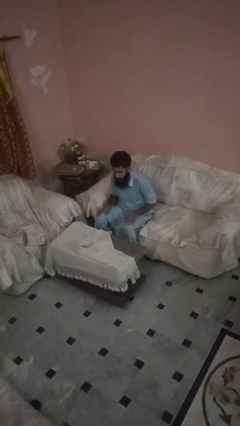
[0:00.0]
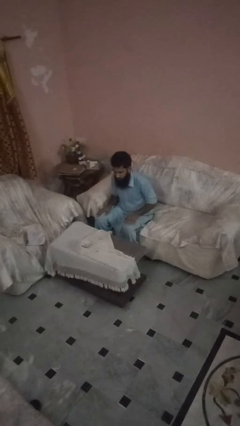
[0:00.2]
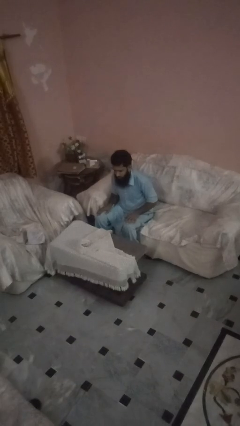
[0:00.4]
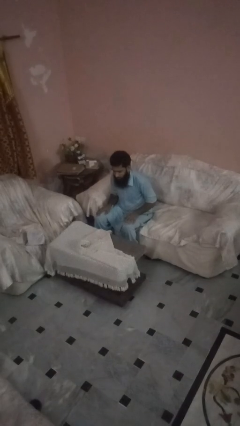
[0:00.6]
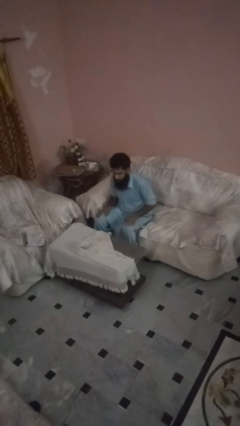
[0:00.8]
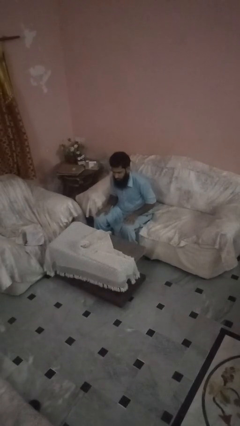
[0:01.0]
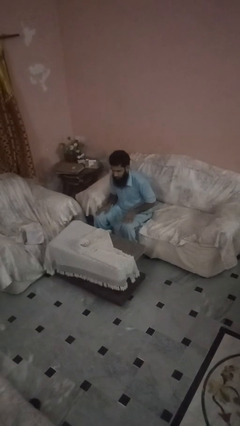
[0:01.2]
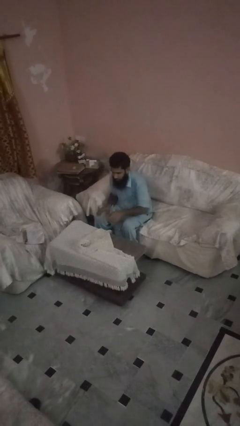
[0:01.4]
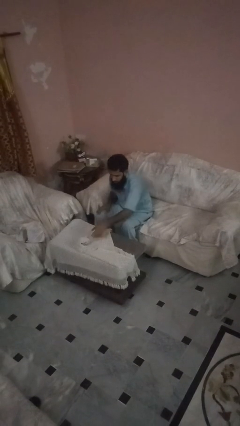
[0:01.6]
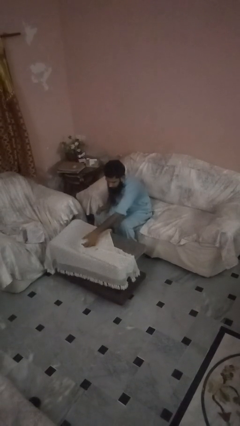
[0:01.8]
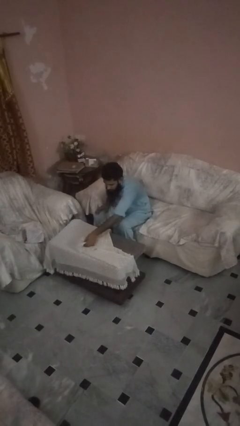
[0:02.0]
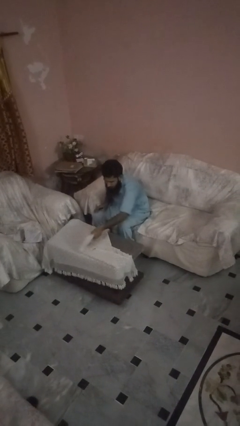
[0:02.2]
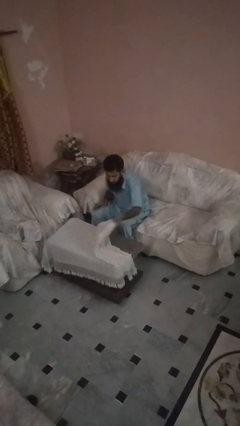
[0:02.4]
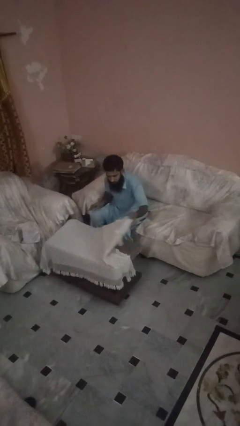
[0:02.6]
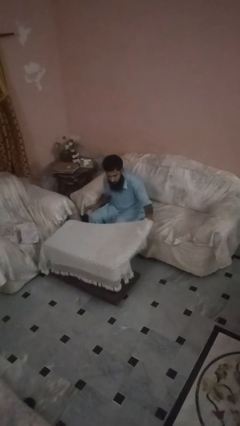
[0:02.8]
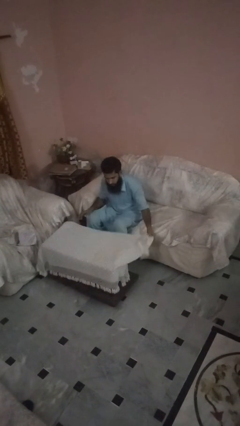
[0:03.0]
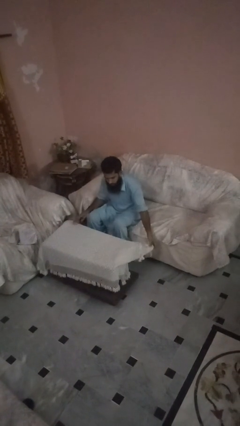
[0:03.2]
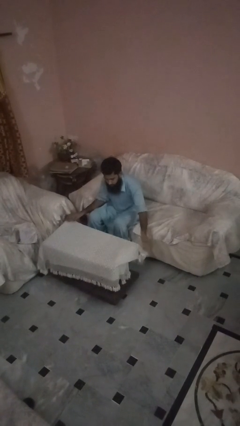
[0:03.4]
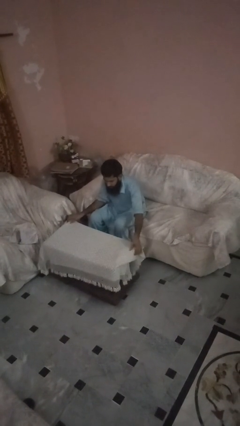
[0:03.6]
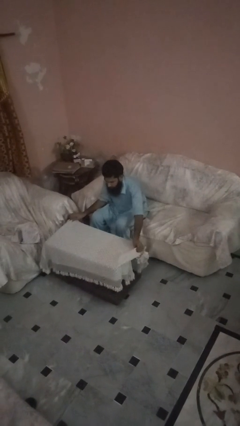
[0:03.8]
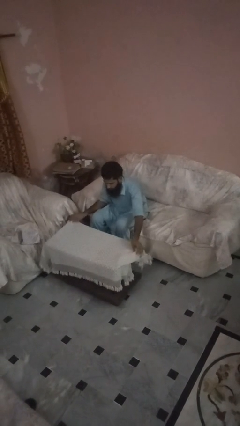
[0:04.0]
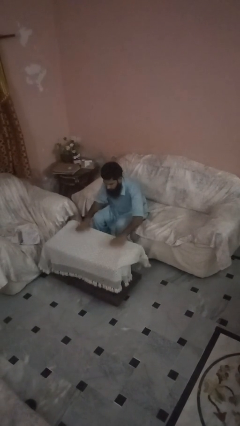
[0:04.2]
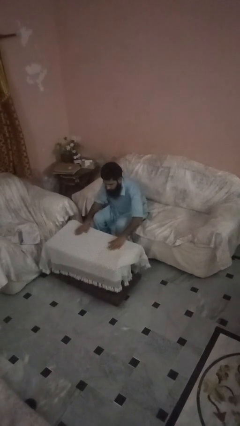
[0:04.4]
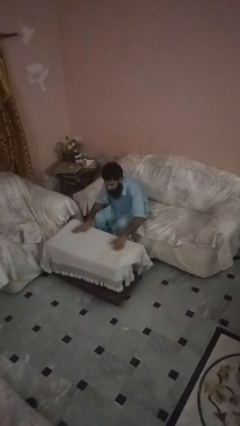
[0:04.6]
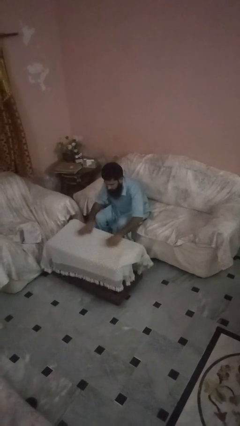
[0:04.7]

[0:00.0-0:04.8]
person spreads tablecloth

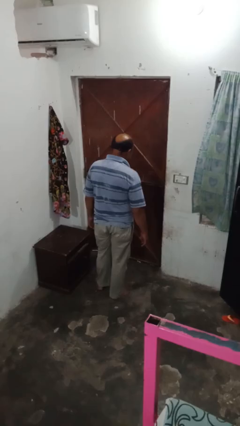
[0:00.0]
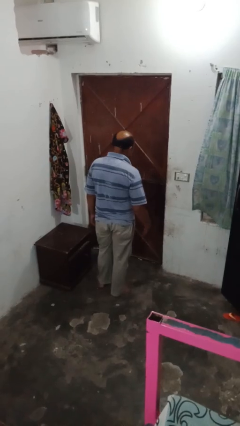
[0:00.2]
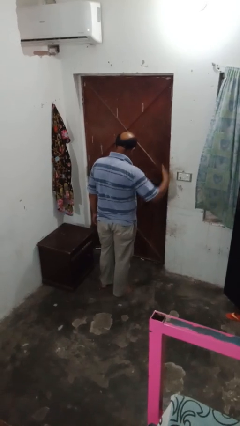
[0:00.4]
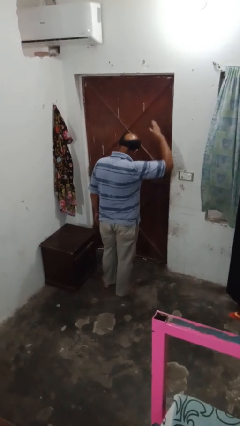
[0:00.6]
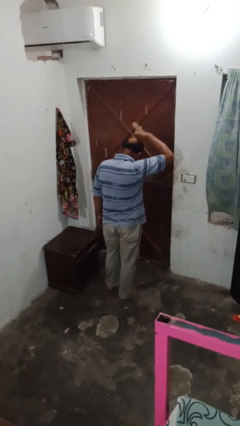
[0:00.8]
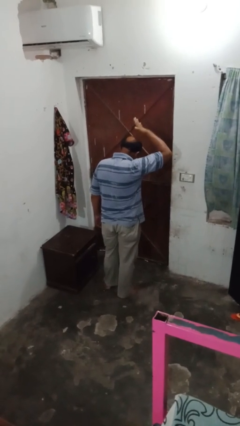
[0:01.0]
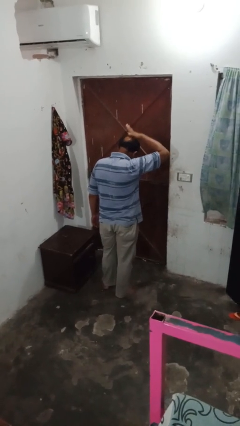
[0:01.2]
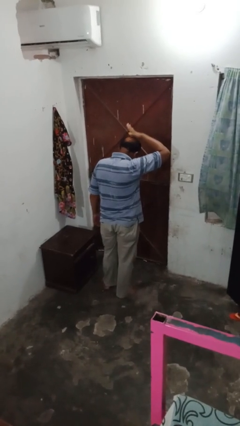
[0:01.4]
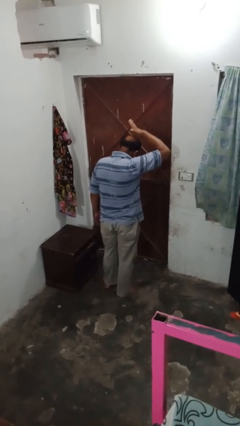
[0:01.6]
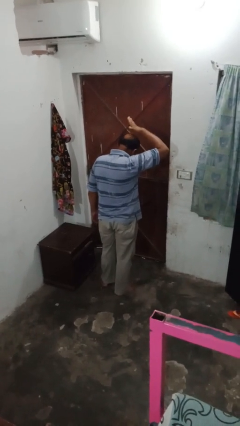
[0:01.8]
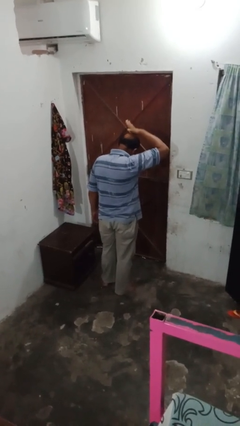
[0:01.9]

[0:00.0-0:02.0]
person pats head

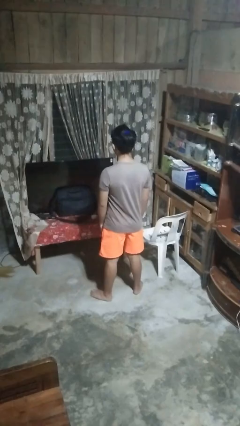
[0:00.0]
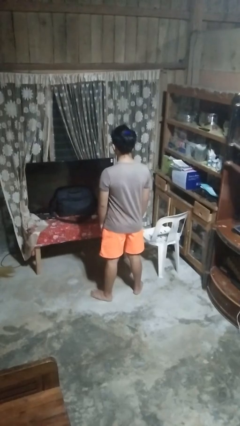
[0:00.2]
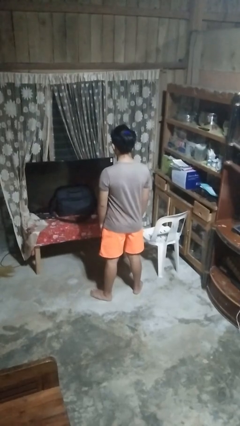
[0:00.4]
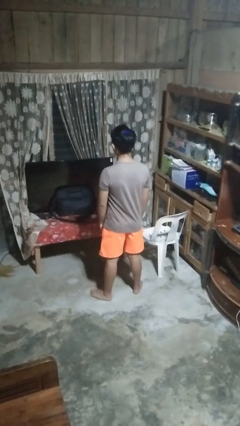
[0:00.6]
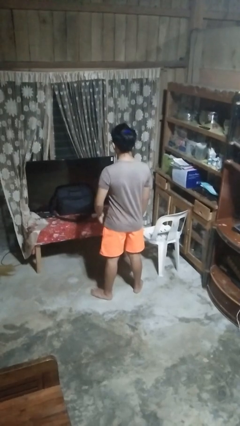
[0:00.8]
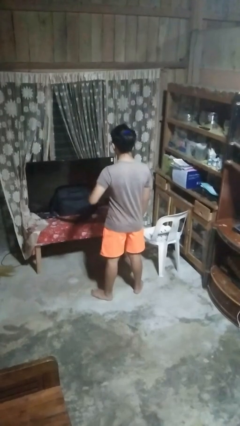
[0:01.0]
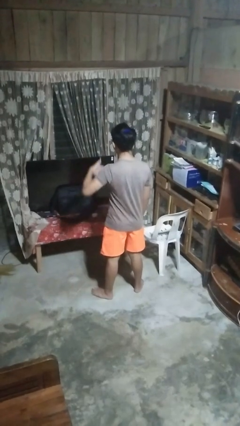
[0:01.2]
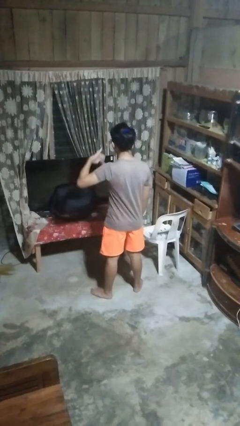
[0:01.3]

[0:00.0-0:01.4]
person gestures call me

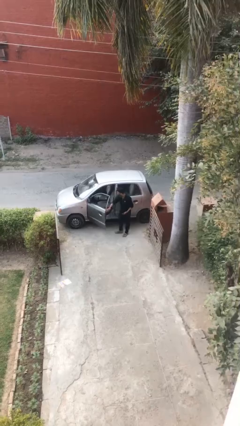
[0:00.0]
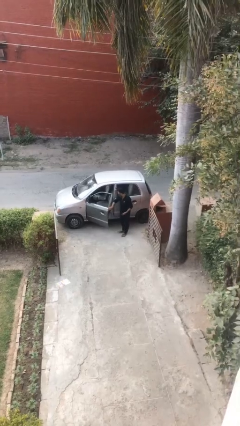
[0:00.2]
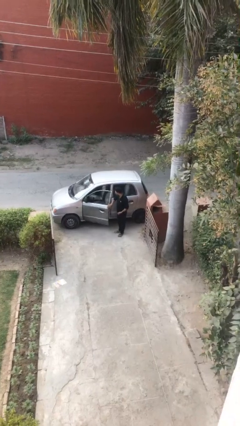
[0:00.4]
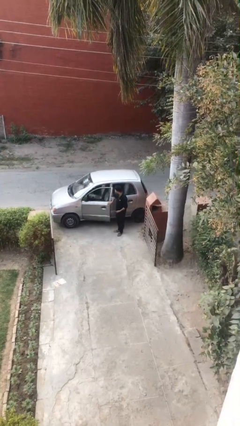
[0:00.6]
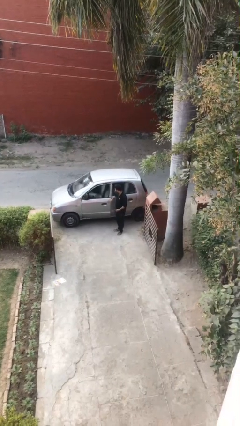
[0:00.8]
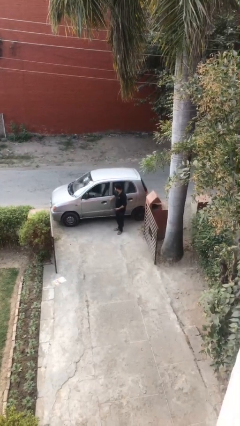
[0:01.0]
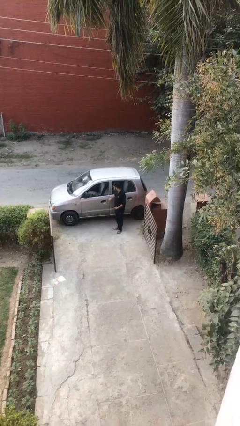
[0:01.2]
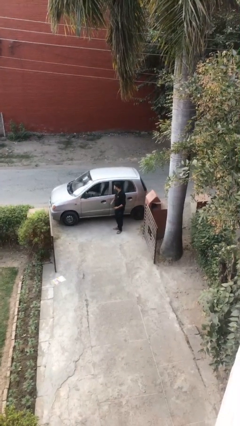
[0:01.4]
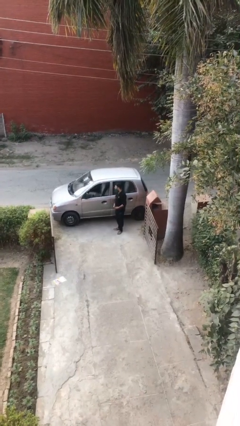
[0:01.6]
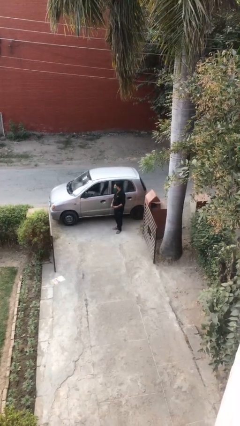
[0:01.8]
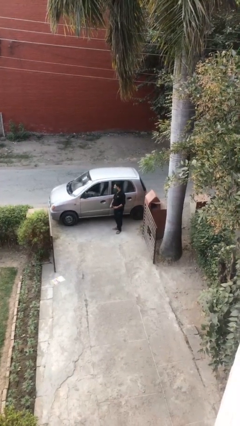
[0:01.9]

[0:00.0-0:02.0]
person closes car door

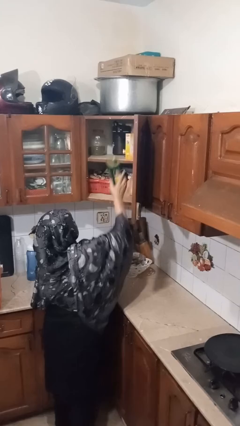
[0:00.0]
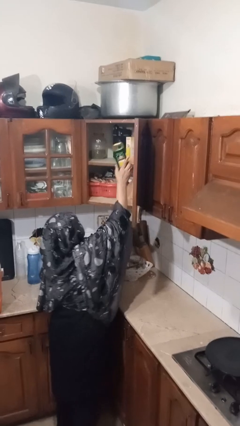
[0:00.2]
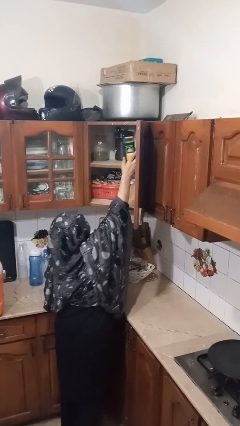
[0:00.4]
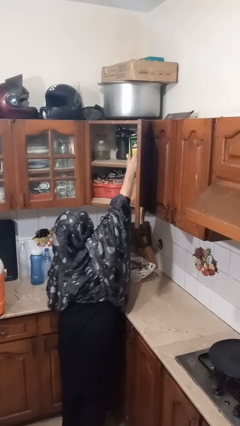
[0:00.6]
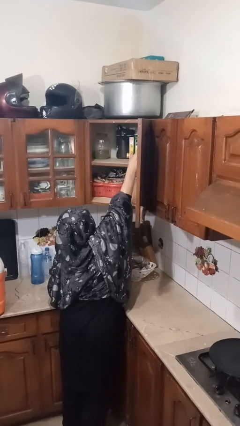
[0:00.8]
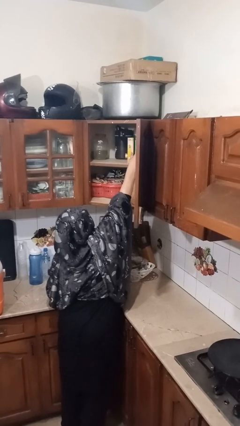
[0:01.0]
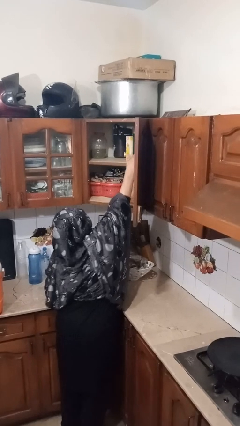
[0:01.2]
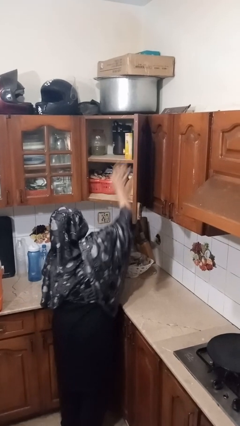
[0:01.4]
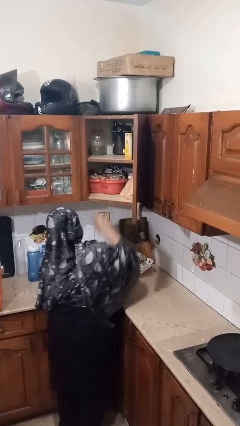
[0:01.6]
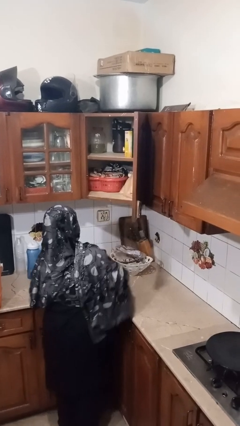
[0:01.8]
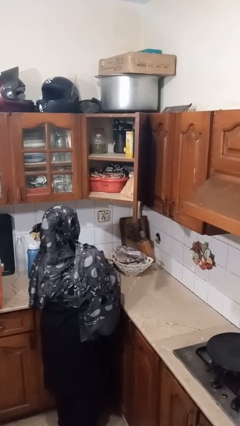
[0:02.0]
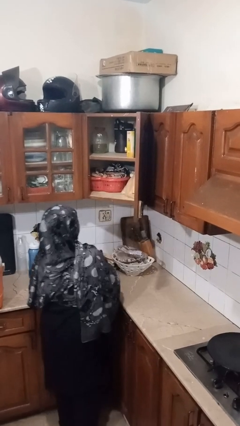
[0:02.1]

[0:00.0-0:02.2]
person loads groceries into cabinet

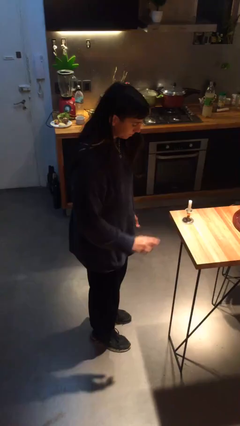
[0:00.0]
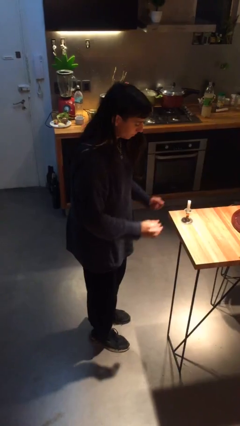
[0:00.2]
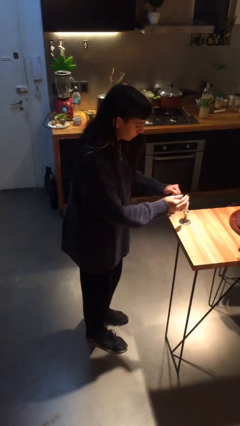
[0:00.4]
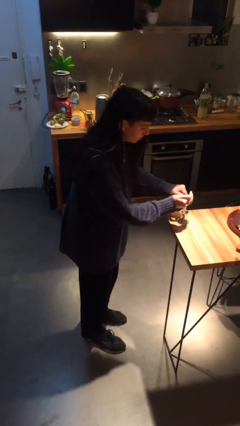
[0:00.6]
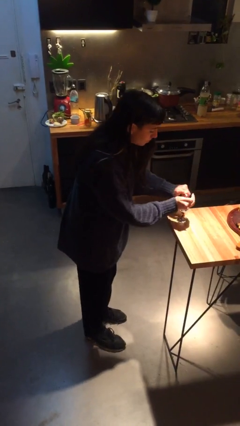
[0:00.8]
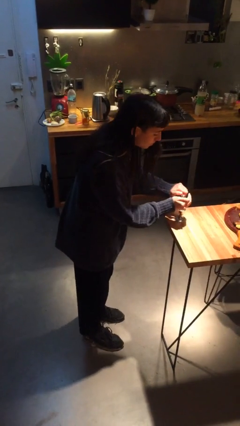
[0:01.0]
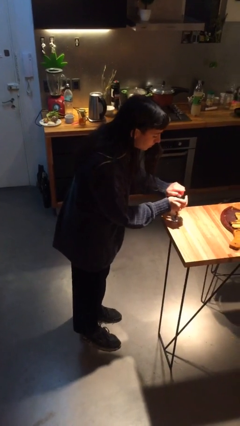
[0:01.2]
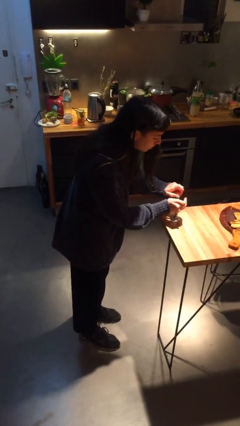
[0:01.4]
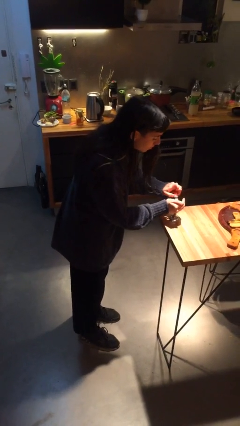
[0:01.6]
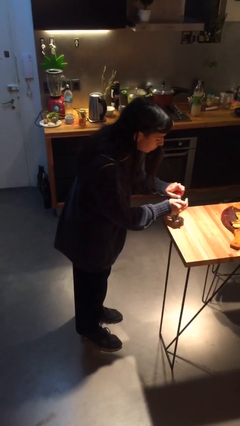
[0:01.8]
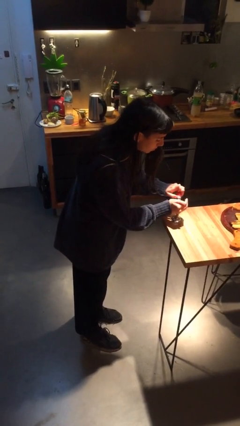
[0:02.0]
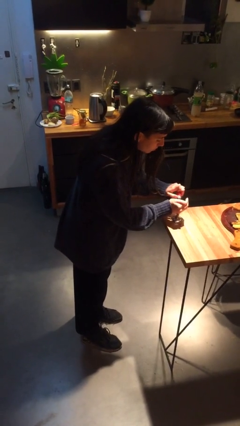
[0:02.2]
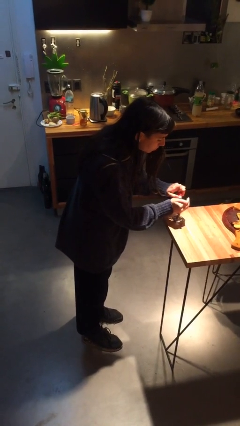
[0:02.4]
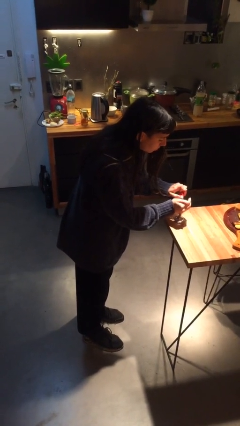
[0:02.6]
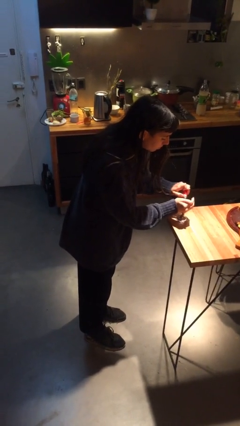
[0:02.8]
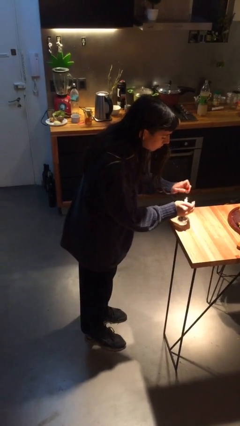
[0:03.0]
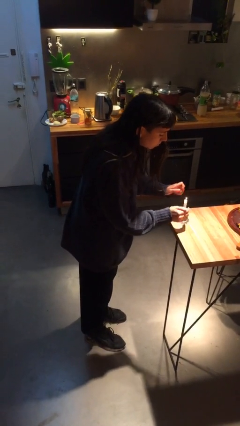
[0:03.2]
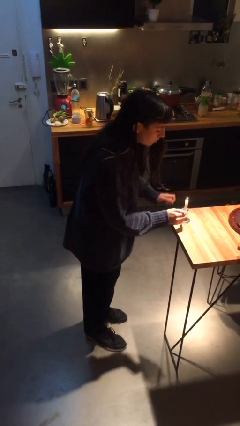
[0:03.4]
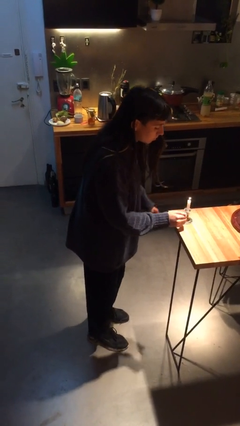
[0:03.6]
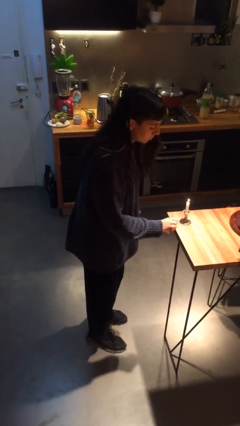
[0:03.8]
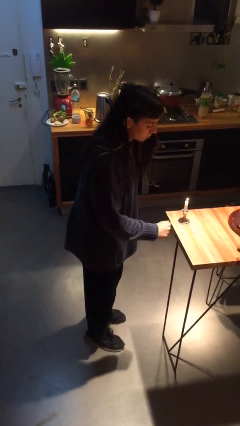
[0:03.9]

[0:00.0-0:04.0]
person lights candle

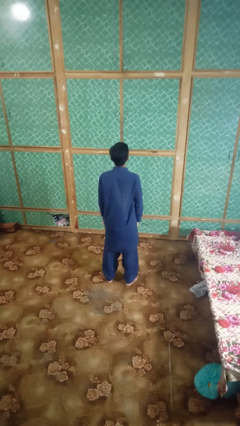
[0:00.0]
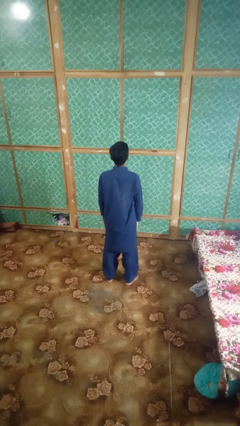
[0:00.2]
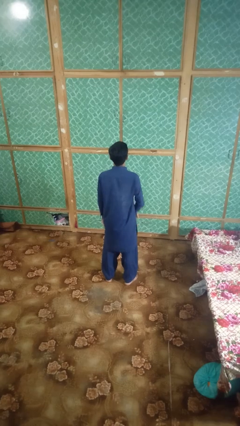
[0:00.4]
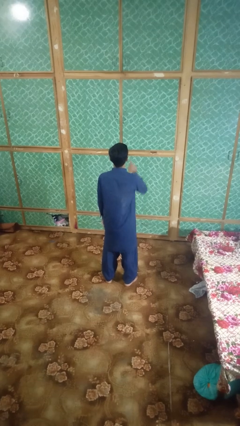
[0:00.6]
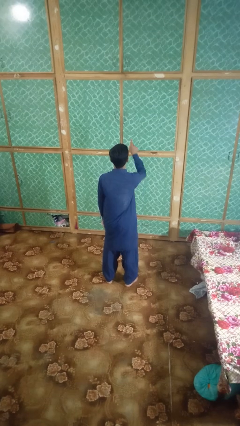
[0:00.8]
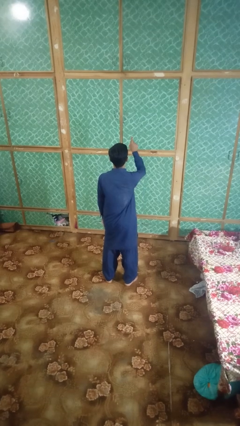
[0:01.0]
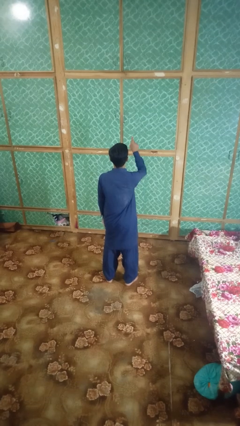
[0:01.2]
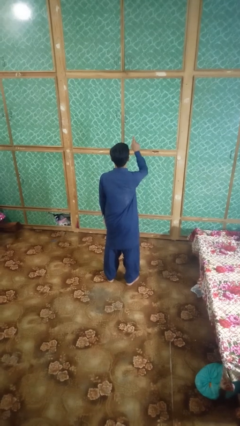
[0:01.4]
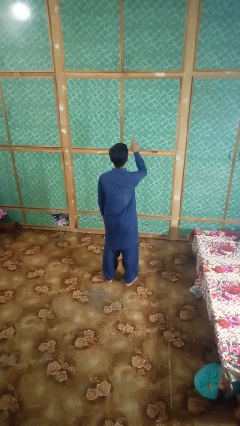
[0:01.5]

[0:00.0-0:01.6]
person gestures number one
